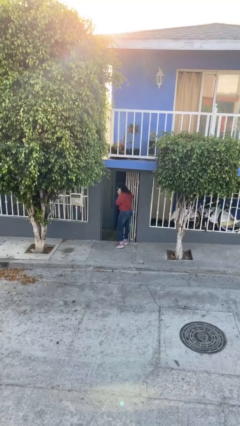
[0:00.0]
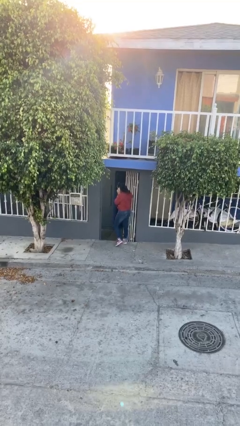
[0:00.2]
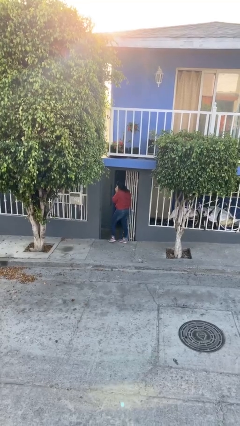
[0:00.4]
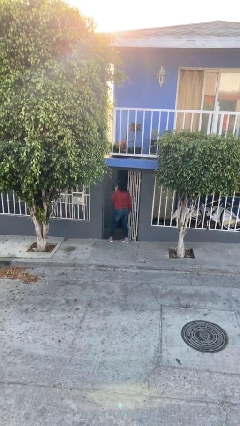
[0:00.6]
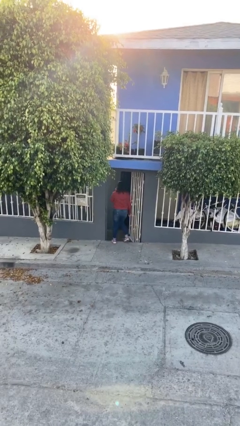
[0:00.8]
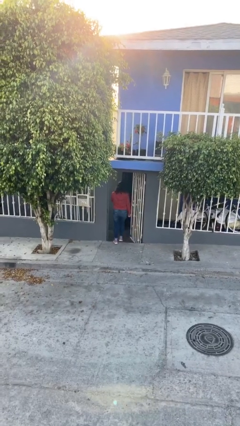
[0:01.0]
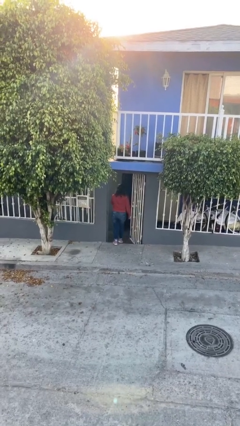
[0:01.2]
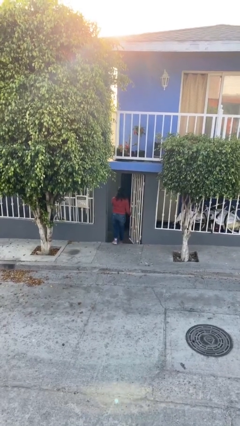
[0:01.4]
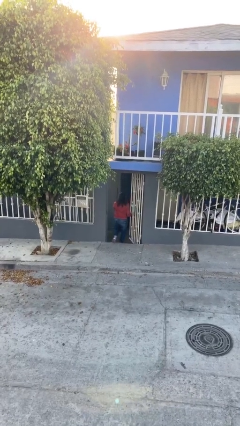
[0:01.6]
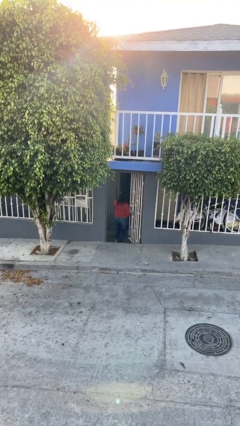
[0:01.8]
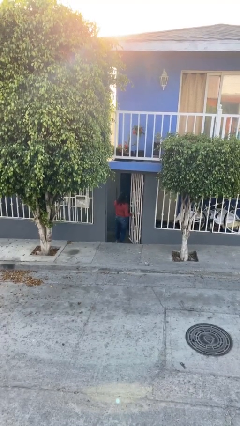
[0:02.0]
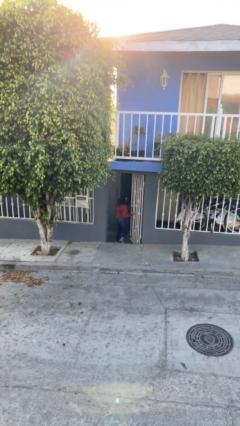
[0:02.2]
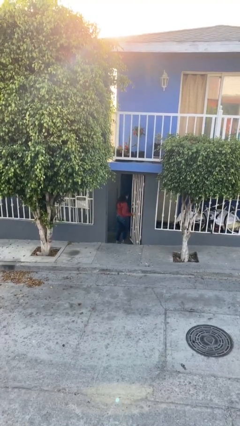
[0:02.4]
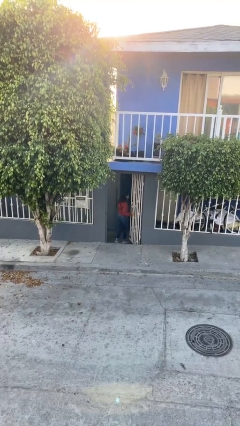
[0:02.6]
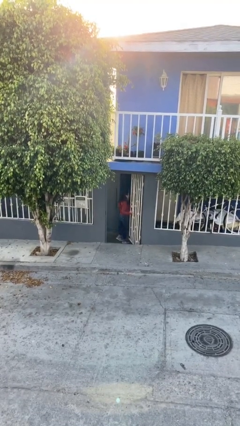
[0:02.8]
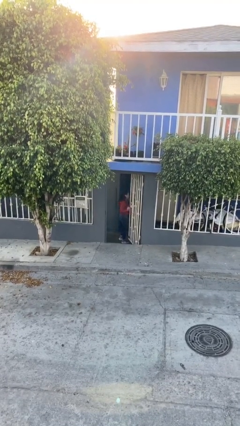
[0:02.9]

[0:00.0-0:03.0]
person exits scene through structure

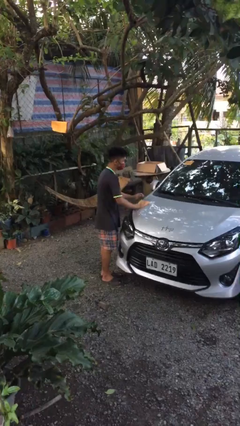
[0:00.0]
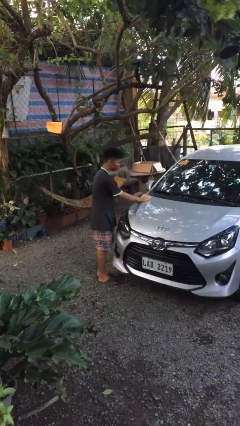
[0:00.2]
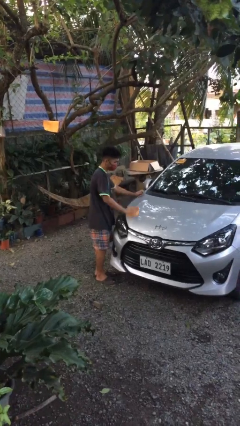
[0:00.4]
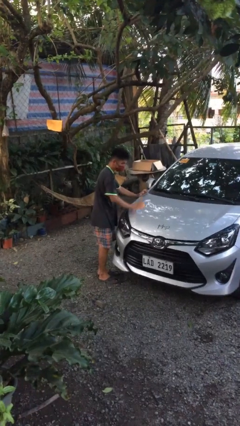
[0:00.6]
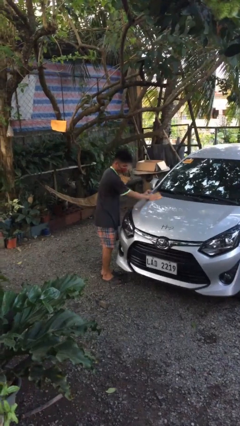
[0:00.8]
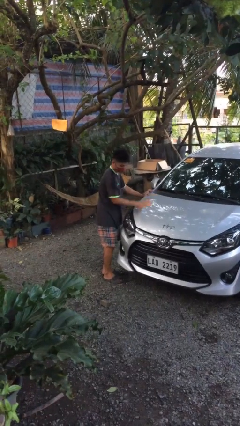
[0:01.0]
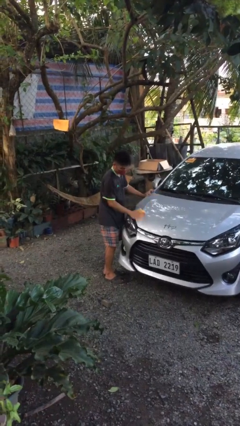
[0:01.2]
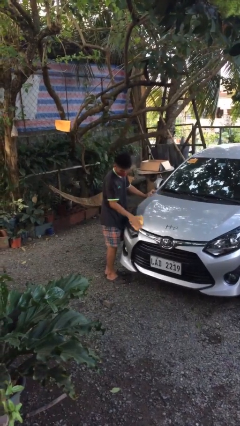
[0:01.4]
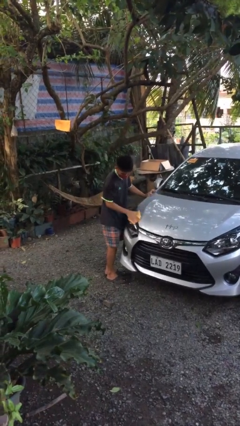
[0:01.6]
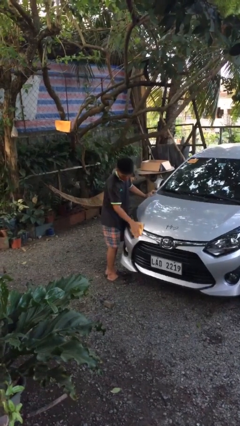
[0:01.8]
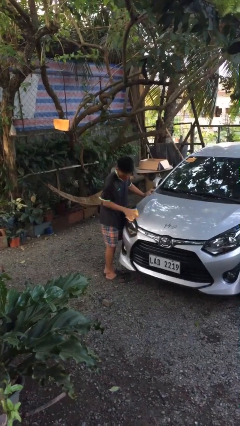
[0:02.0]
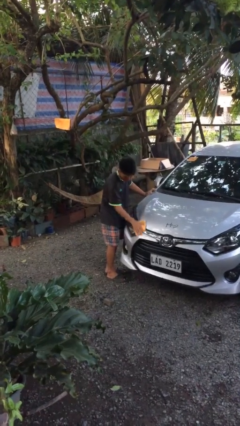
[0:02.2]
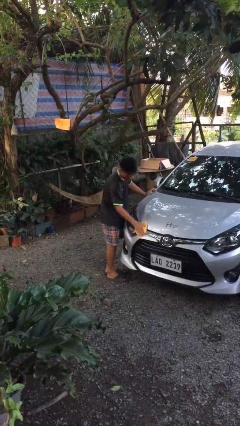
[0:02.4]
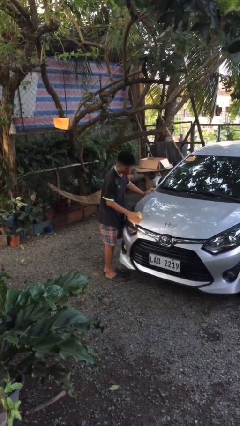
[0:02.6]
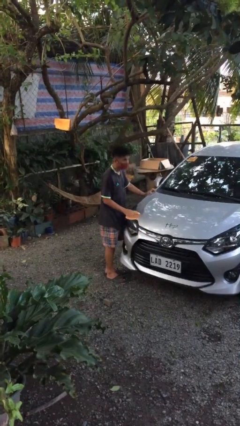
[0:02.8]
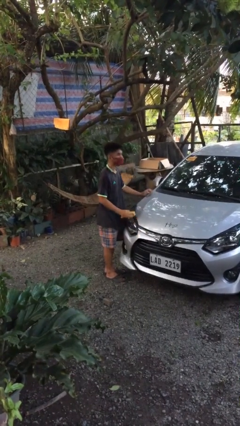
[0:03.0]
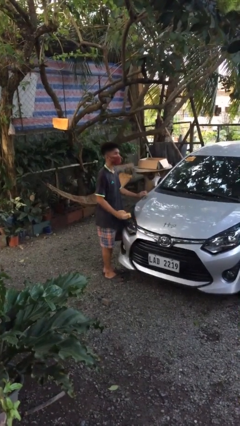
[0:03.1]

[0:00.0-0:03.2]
person polishes car with rag

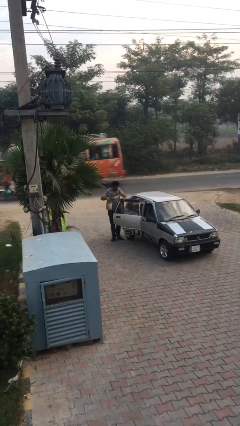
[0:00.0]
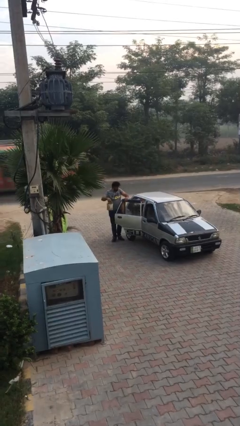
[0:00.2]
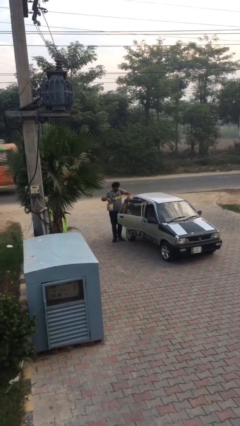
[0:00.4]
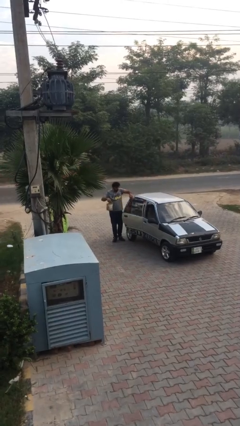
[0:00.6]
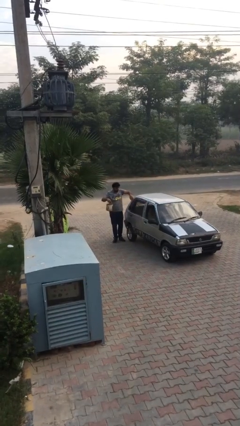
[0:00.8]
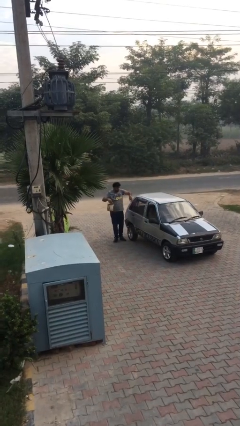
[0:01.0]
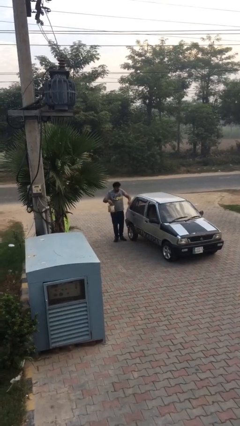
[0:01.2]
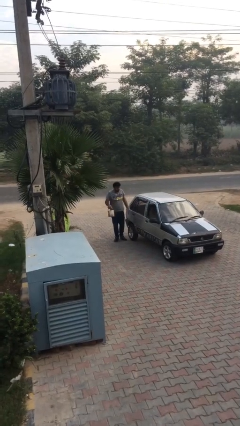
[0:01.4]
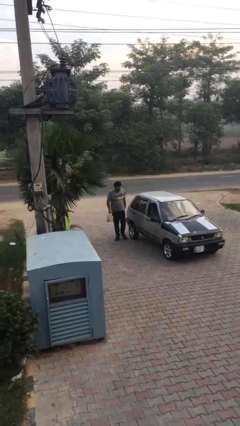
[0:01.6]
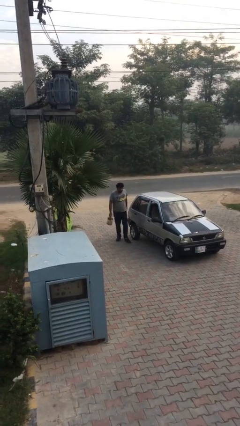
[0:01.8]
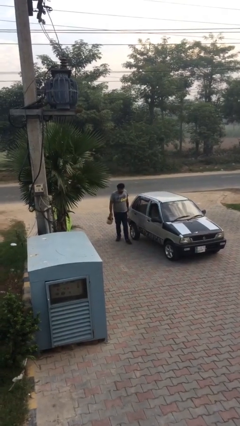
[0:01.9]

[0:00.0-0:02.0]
person closes car door

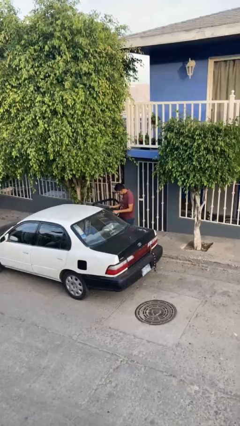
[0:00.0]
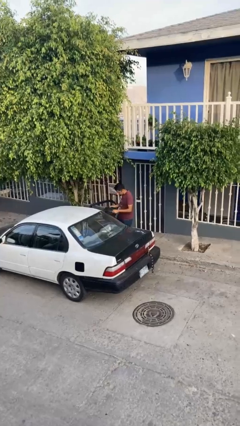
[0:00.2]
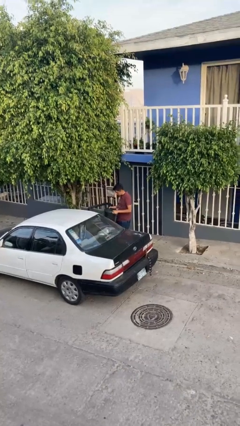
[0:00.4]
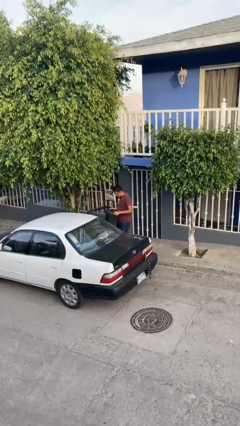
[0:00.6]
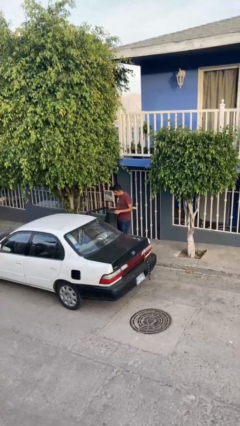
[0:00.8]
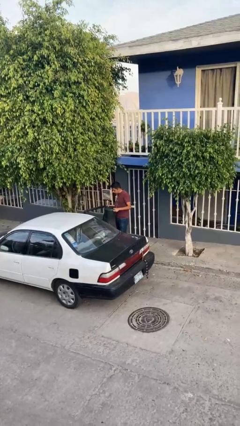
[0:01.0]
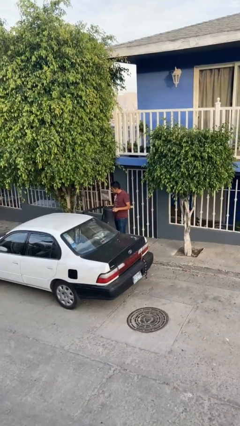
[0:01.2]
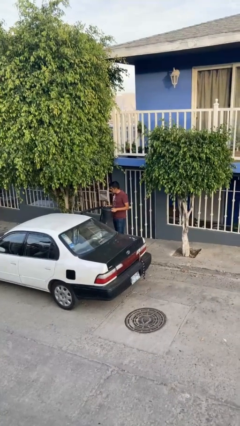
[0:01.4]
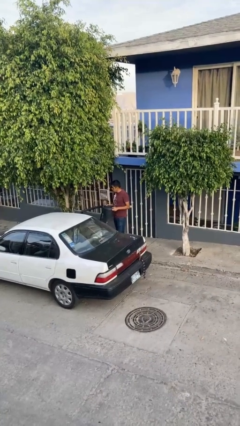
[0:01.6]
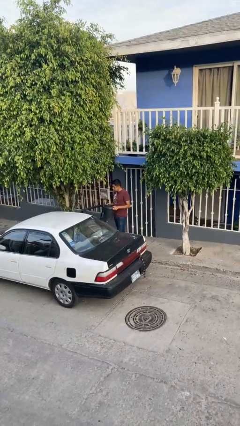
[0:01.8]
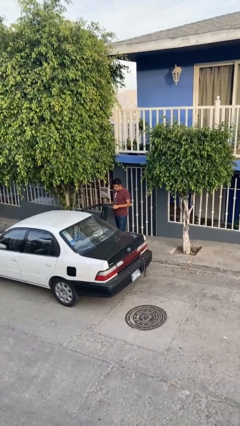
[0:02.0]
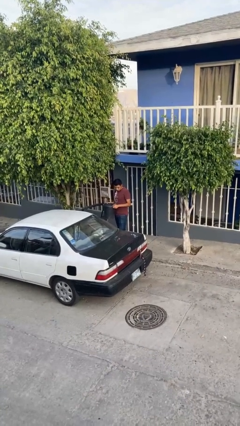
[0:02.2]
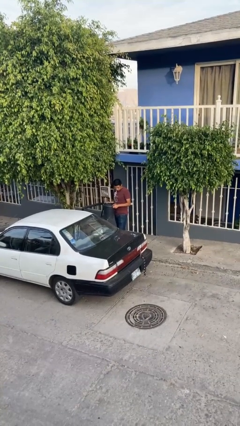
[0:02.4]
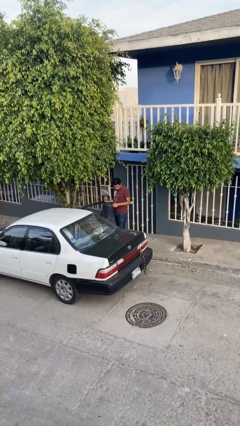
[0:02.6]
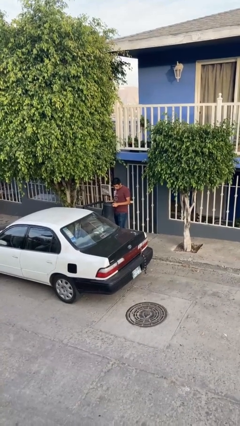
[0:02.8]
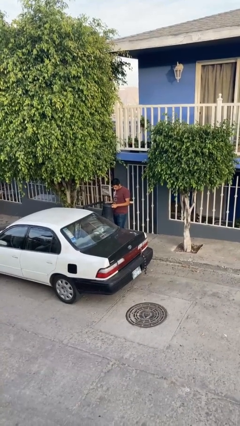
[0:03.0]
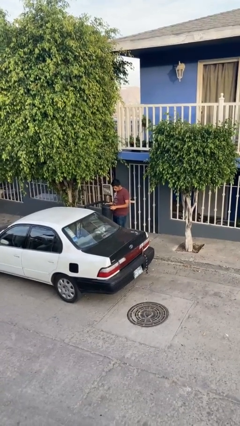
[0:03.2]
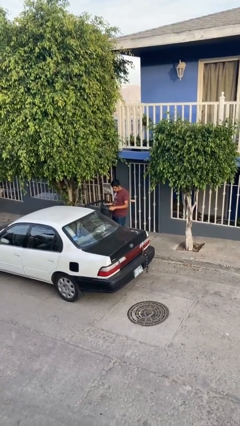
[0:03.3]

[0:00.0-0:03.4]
person unloads car

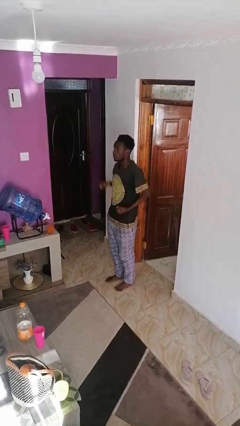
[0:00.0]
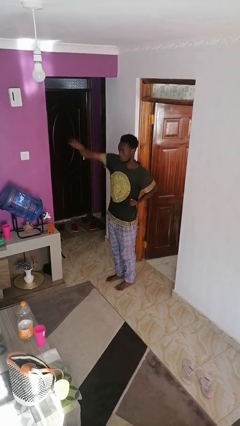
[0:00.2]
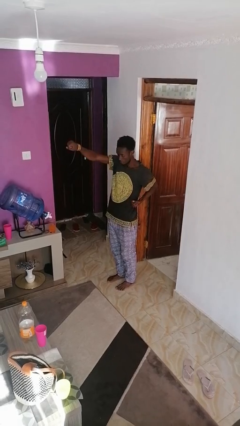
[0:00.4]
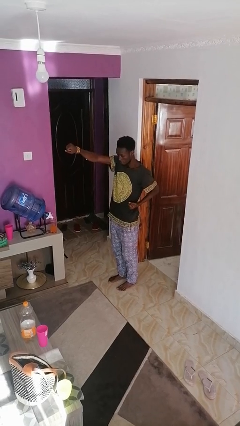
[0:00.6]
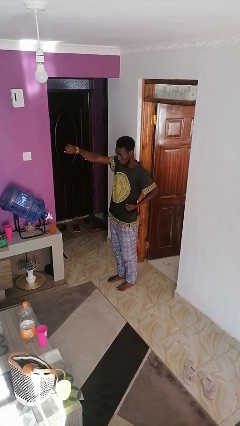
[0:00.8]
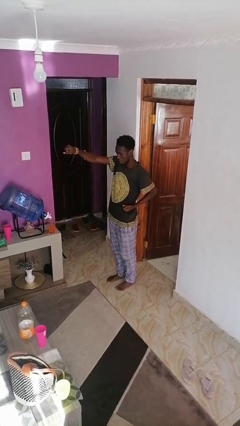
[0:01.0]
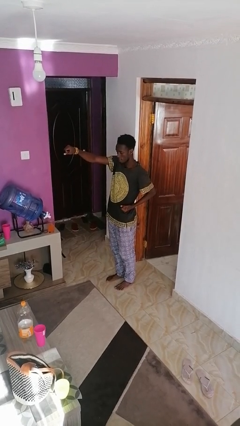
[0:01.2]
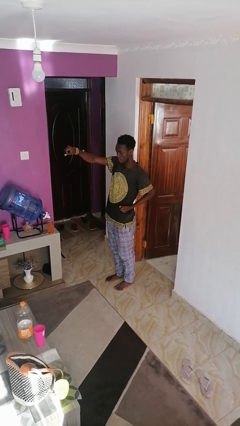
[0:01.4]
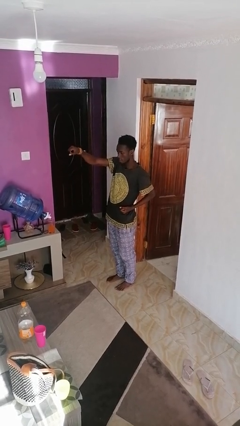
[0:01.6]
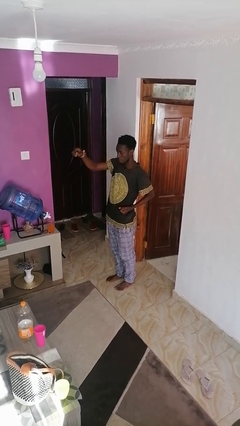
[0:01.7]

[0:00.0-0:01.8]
person punches

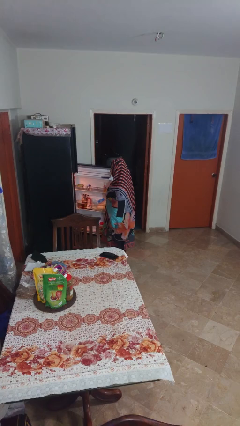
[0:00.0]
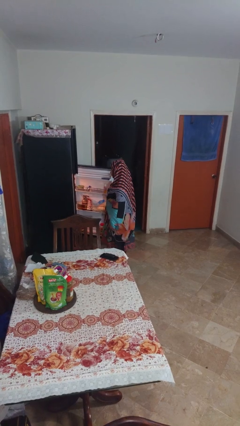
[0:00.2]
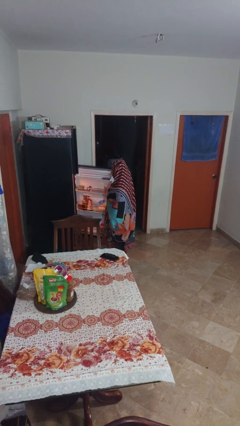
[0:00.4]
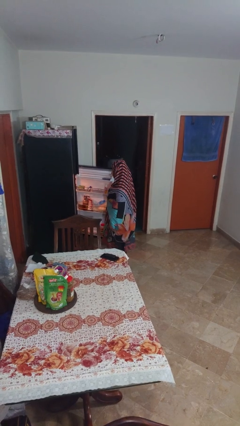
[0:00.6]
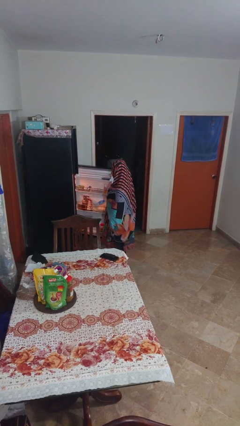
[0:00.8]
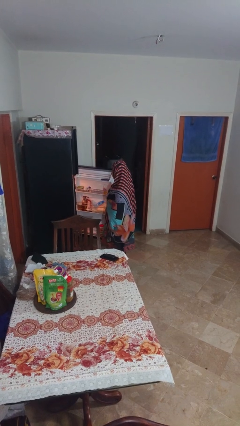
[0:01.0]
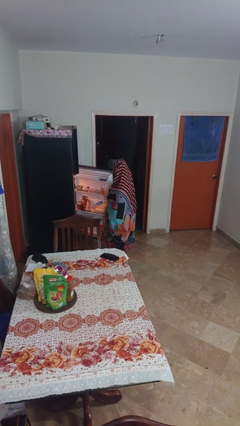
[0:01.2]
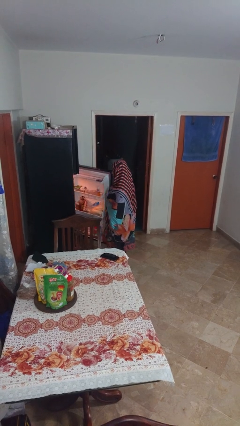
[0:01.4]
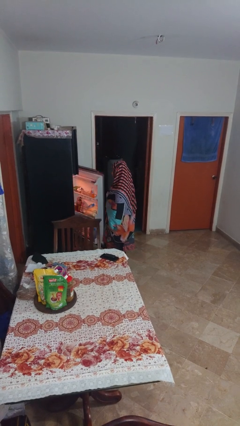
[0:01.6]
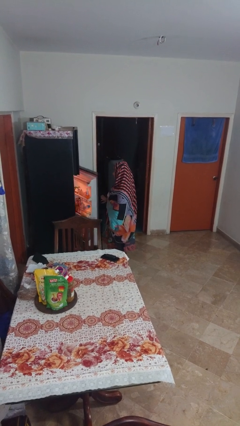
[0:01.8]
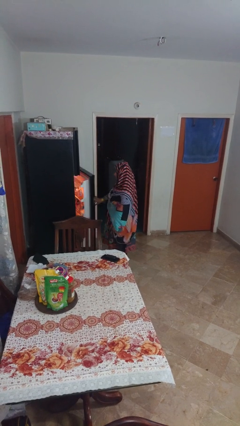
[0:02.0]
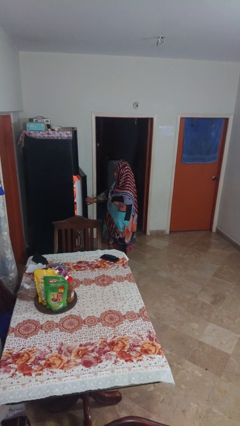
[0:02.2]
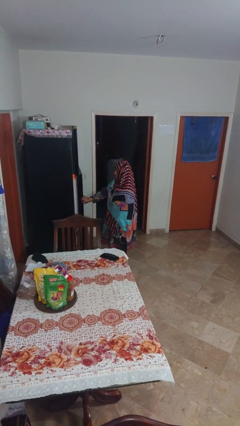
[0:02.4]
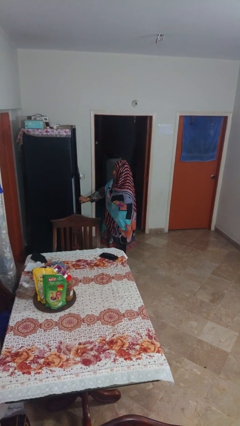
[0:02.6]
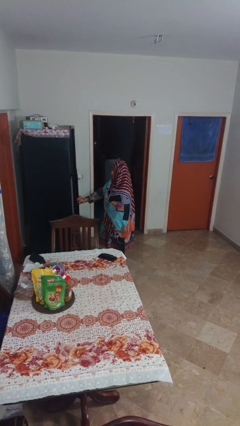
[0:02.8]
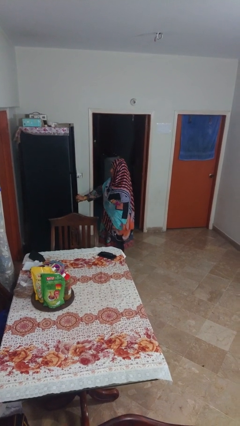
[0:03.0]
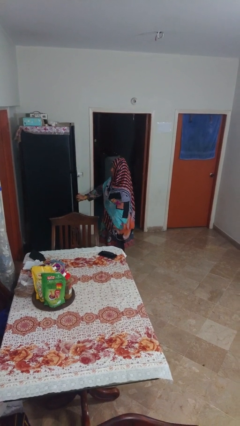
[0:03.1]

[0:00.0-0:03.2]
person closes refrigerator

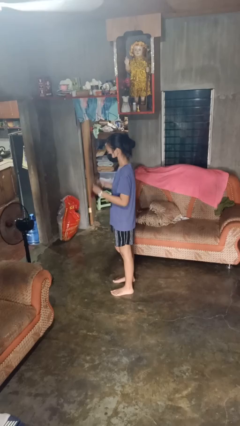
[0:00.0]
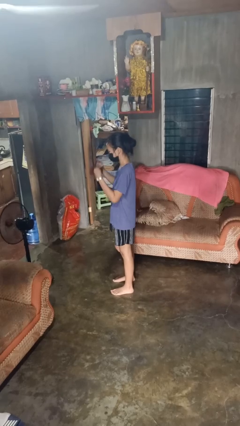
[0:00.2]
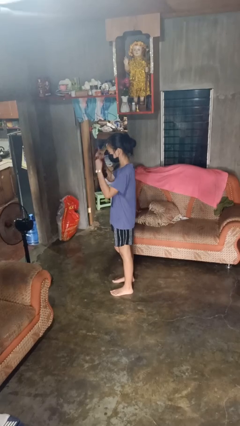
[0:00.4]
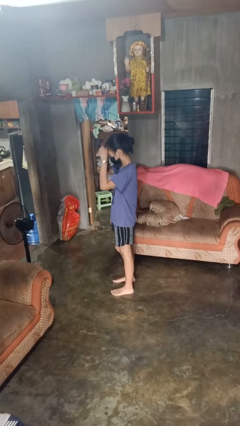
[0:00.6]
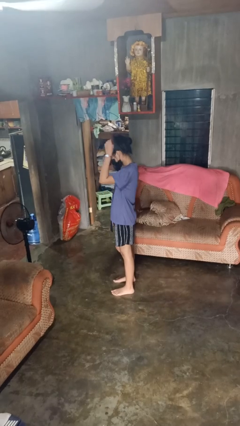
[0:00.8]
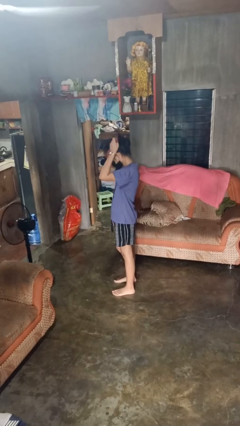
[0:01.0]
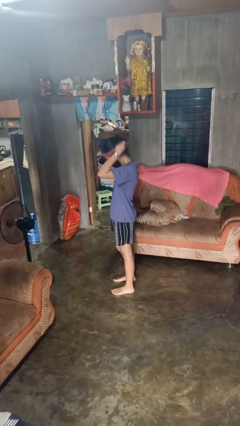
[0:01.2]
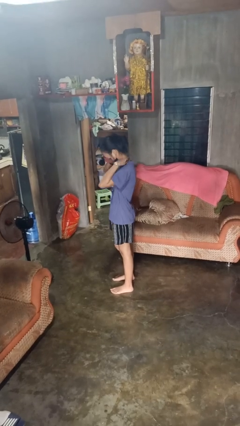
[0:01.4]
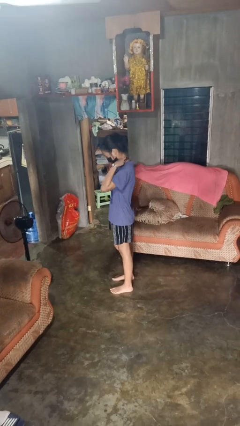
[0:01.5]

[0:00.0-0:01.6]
person puts on necklace
